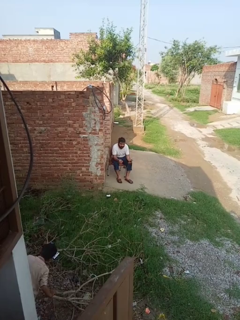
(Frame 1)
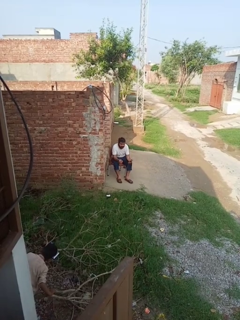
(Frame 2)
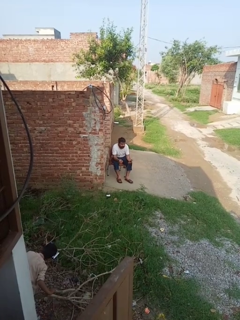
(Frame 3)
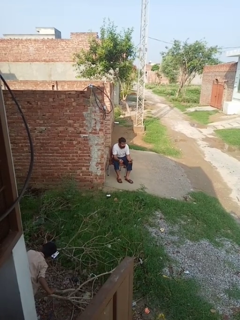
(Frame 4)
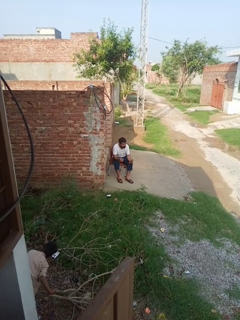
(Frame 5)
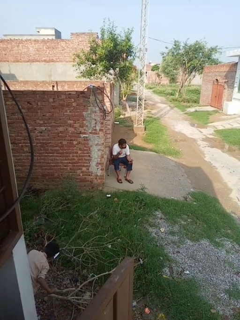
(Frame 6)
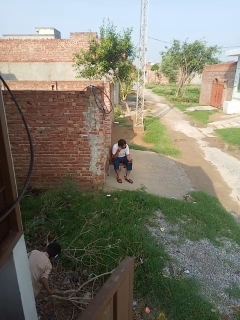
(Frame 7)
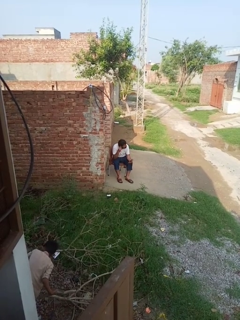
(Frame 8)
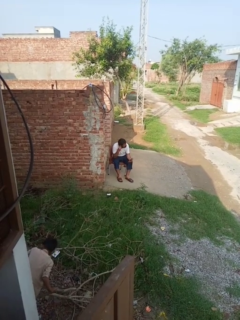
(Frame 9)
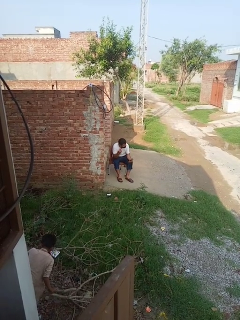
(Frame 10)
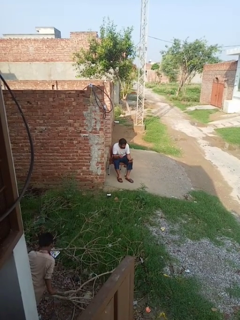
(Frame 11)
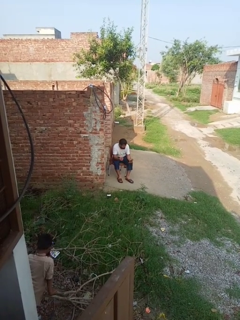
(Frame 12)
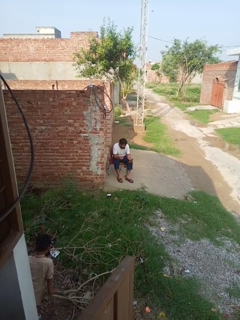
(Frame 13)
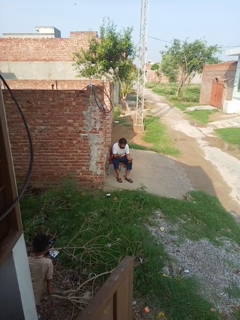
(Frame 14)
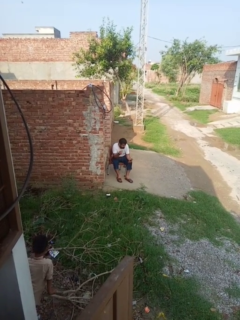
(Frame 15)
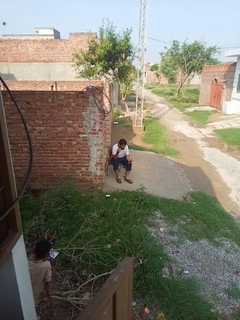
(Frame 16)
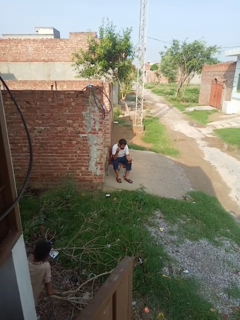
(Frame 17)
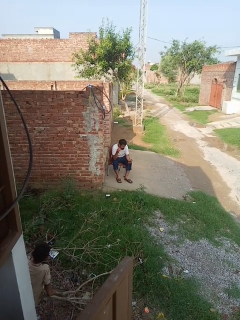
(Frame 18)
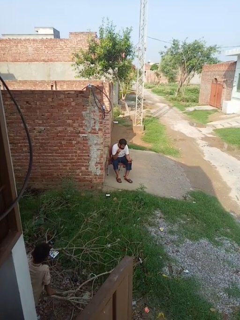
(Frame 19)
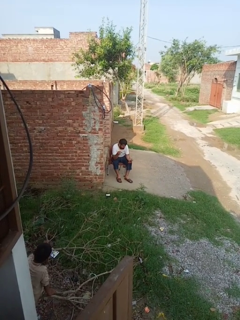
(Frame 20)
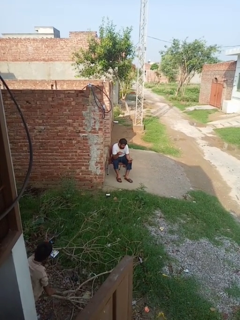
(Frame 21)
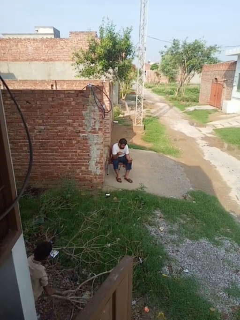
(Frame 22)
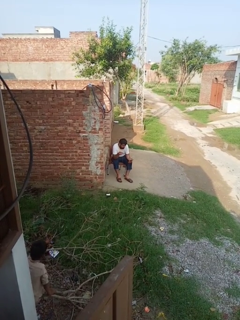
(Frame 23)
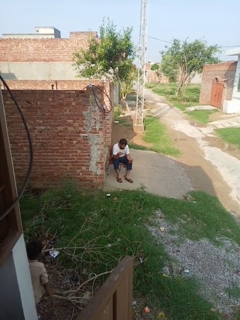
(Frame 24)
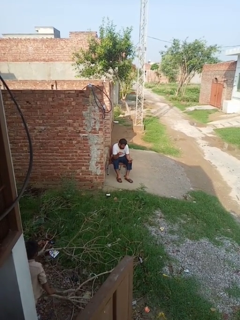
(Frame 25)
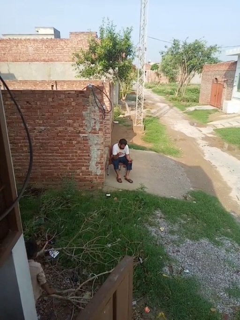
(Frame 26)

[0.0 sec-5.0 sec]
person takes off headphones

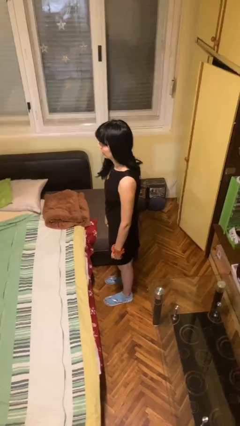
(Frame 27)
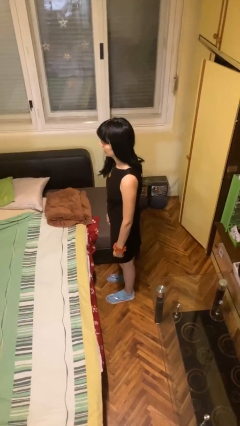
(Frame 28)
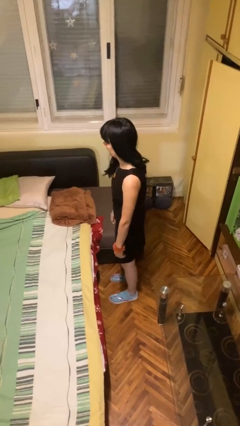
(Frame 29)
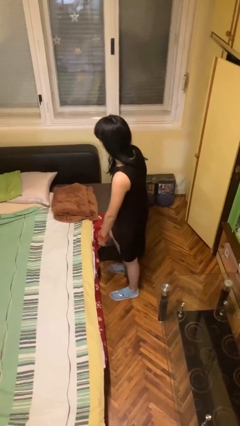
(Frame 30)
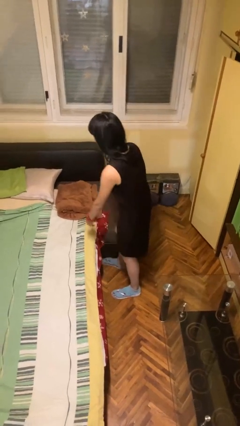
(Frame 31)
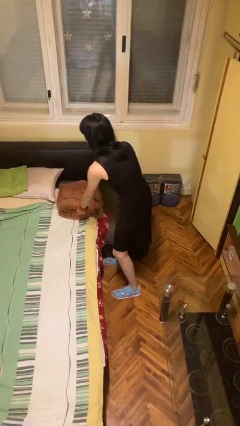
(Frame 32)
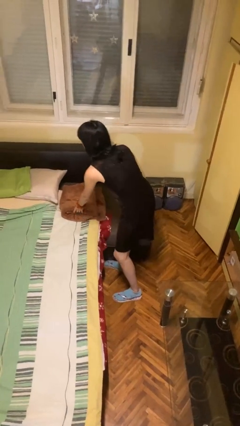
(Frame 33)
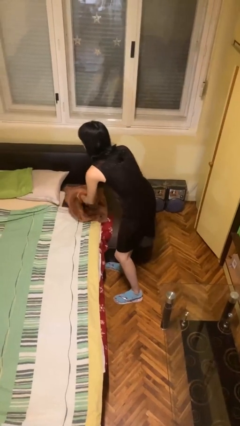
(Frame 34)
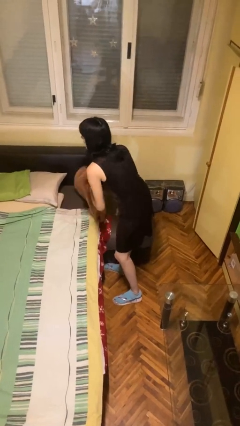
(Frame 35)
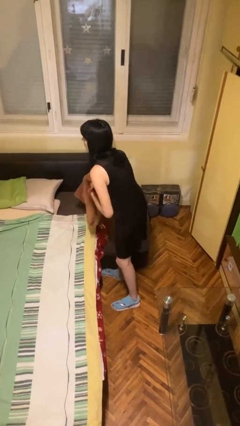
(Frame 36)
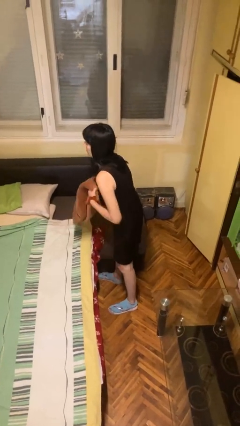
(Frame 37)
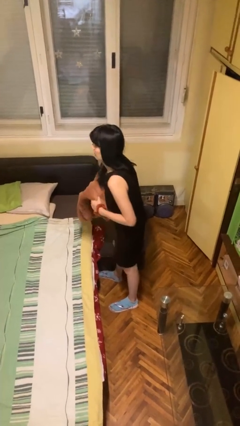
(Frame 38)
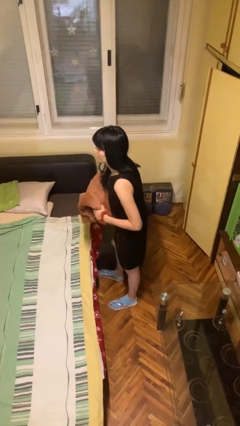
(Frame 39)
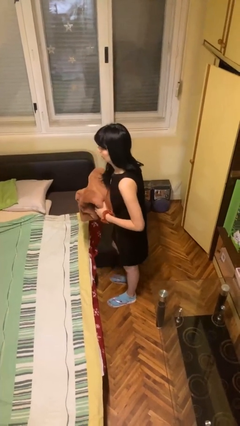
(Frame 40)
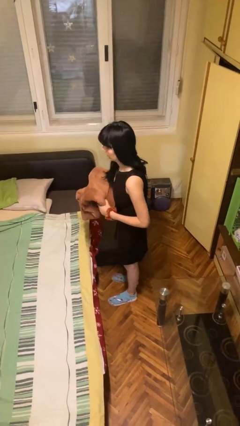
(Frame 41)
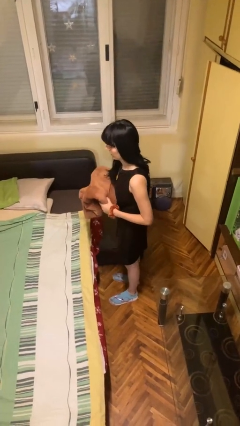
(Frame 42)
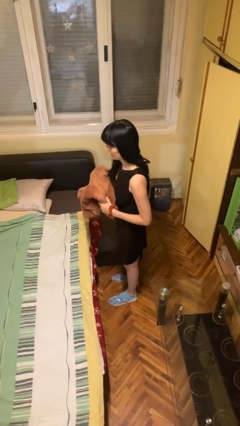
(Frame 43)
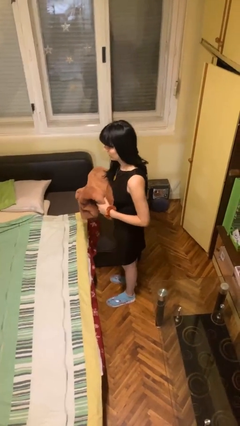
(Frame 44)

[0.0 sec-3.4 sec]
person picks up object from bed

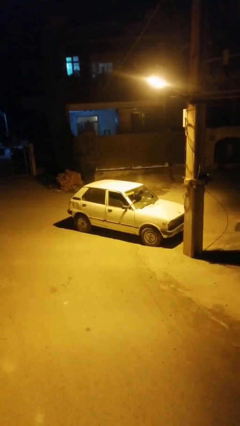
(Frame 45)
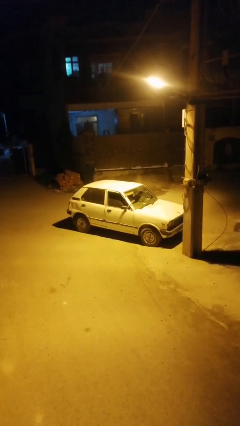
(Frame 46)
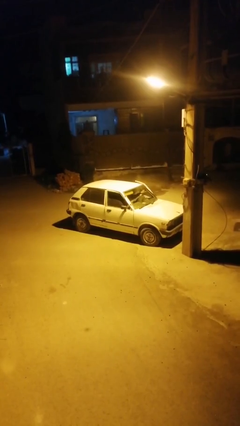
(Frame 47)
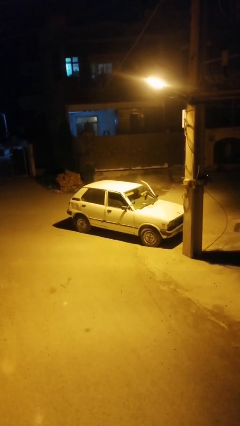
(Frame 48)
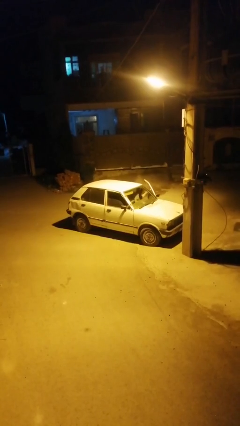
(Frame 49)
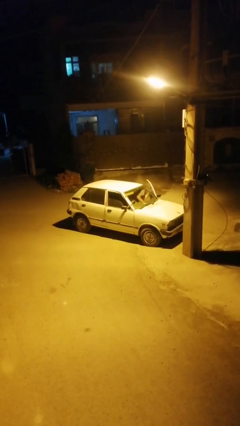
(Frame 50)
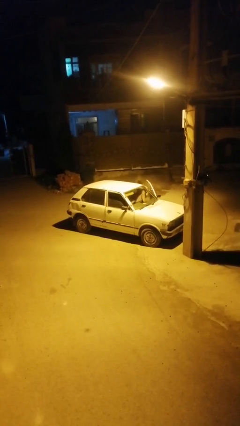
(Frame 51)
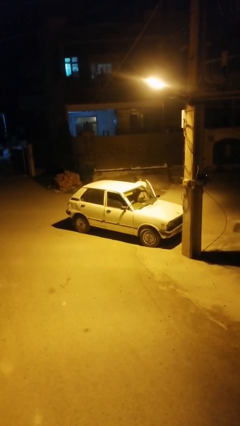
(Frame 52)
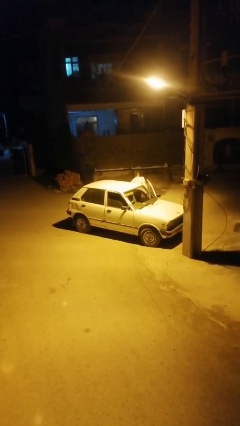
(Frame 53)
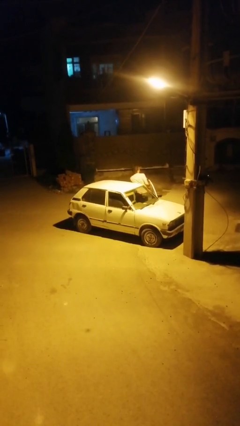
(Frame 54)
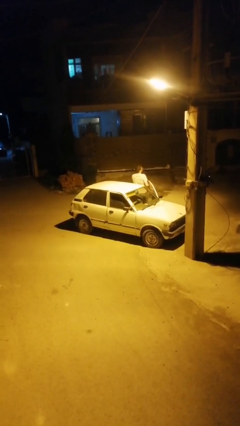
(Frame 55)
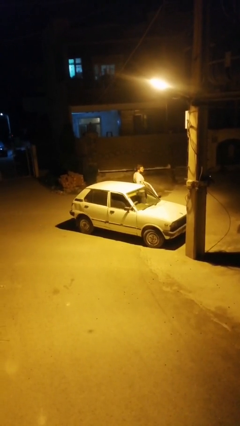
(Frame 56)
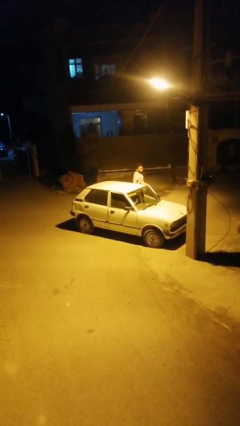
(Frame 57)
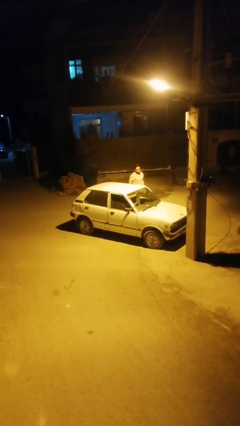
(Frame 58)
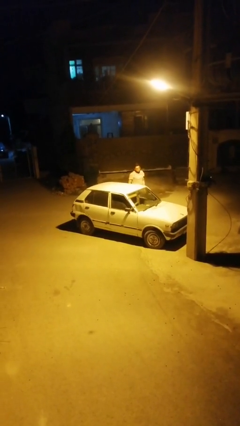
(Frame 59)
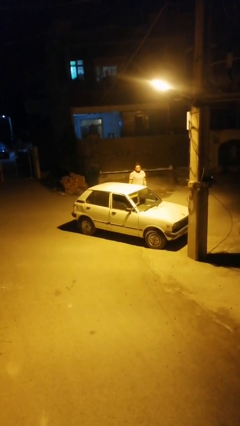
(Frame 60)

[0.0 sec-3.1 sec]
car drops off person

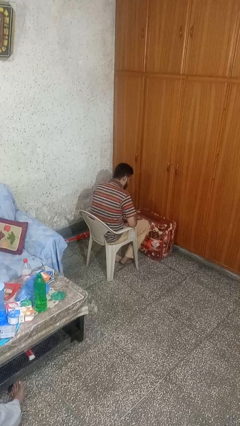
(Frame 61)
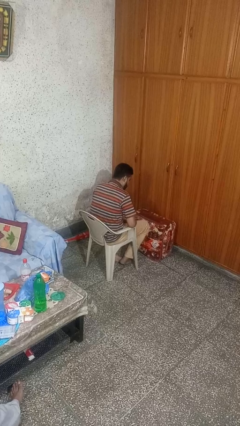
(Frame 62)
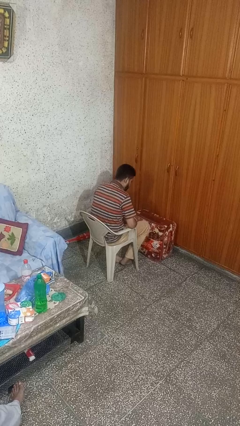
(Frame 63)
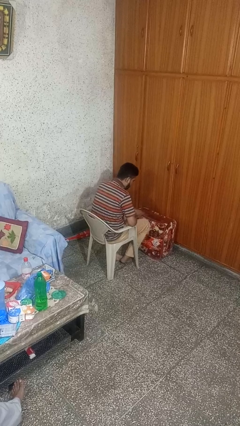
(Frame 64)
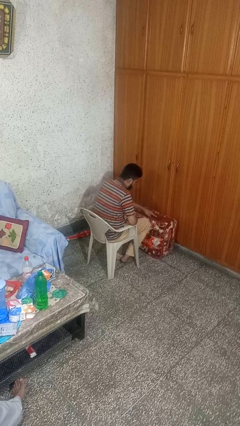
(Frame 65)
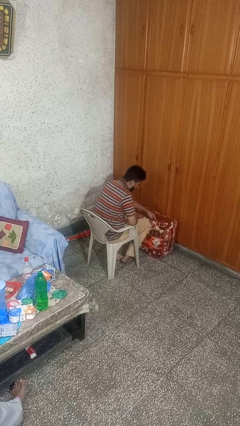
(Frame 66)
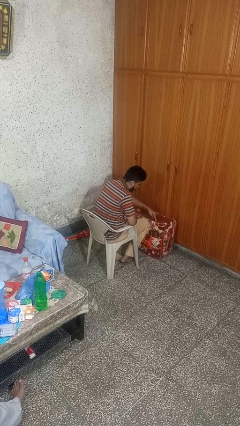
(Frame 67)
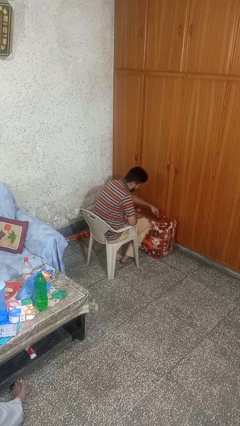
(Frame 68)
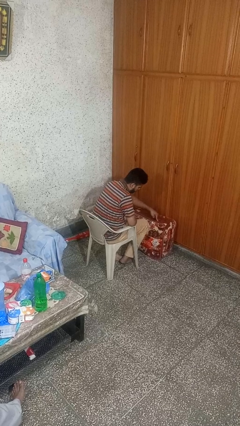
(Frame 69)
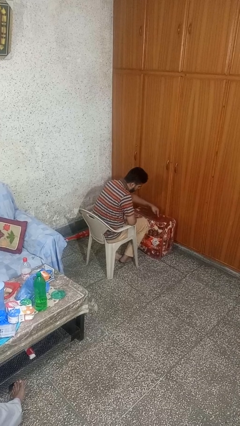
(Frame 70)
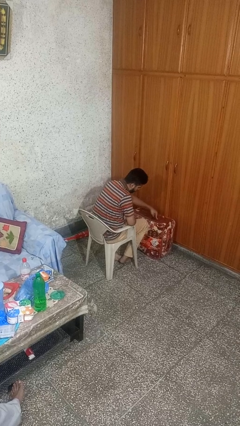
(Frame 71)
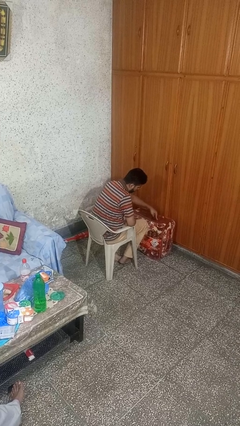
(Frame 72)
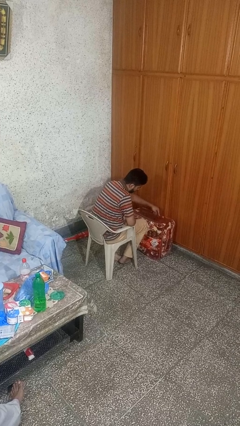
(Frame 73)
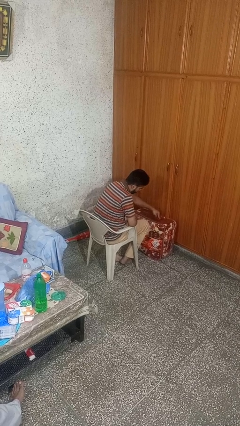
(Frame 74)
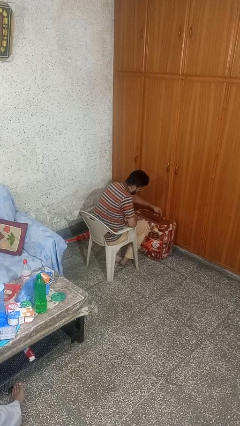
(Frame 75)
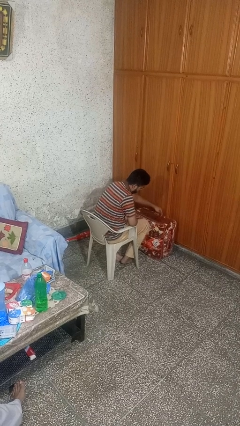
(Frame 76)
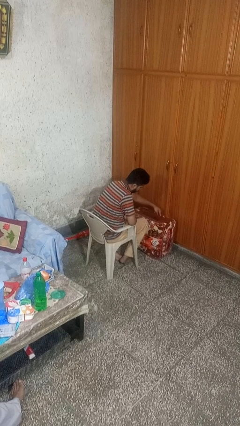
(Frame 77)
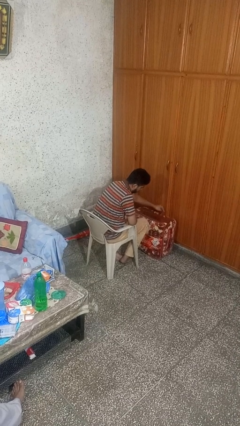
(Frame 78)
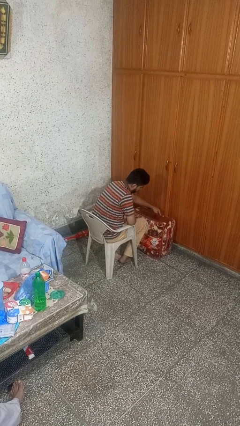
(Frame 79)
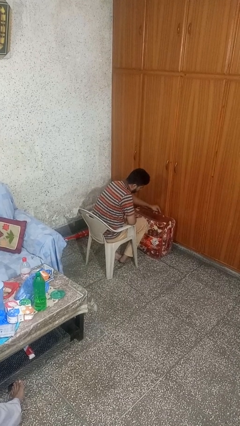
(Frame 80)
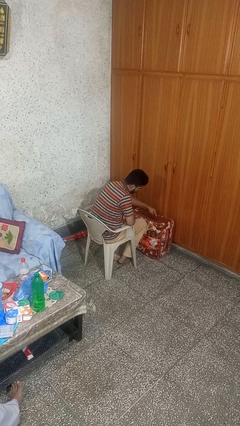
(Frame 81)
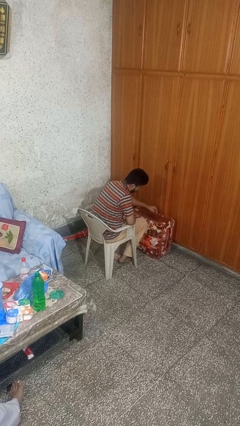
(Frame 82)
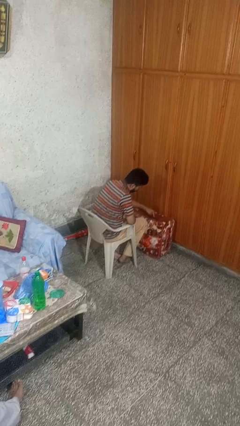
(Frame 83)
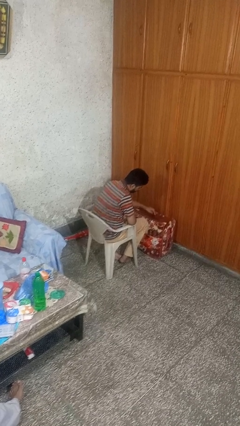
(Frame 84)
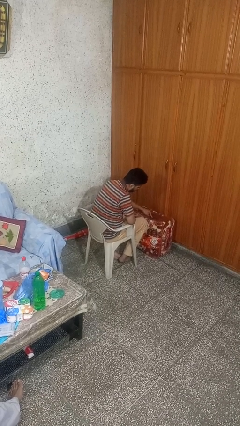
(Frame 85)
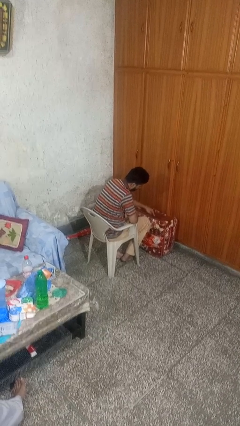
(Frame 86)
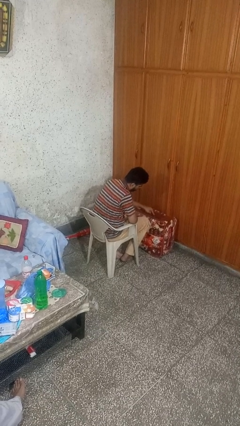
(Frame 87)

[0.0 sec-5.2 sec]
person taps object with finger

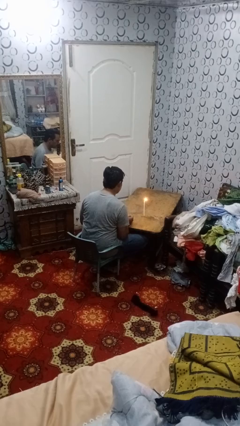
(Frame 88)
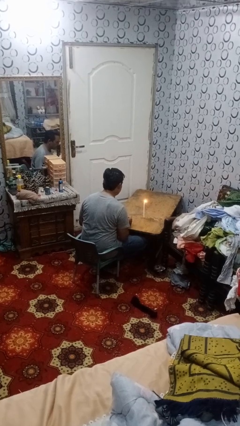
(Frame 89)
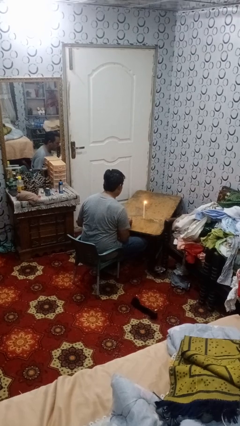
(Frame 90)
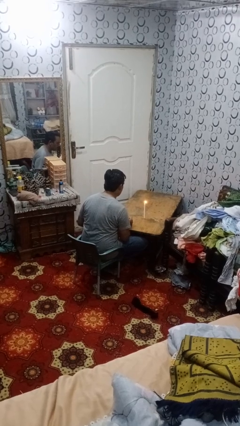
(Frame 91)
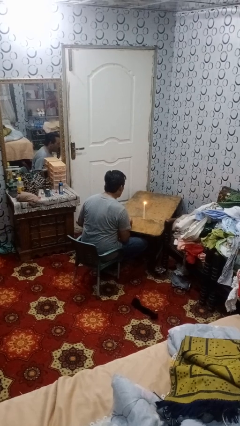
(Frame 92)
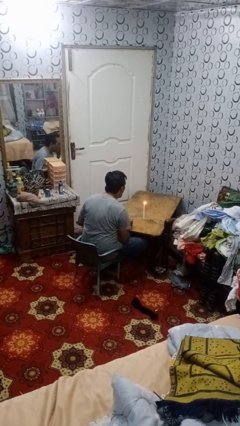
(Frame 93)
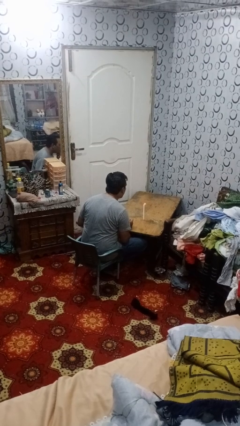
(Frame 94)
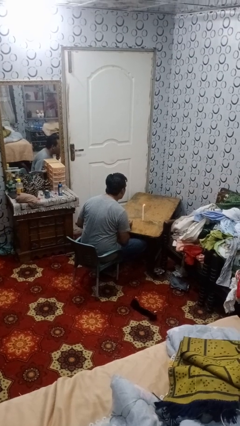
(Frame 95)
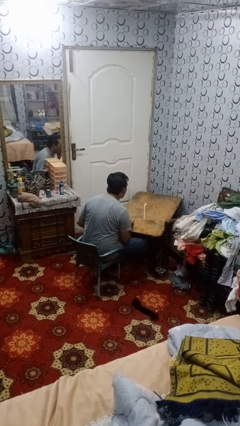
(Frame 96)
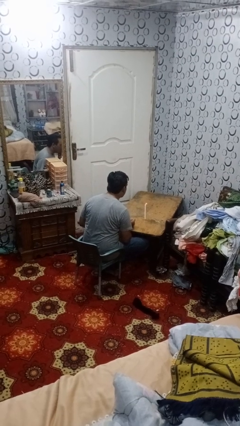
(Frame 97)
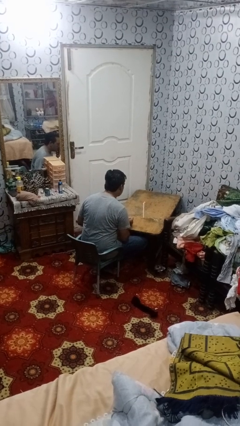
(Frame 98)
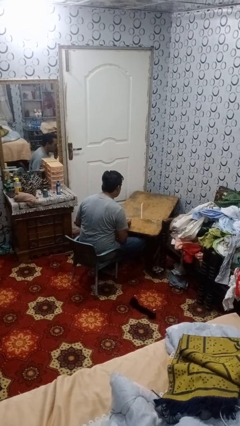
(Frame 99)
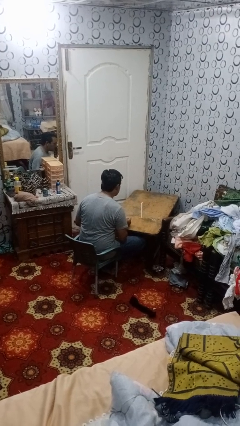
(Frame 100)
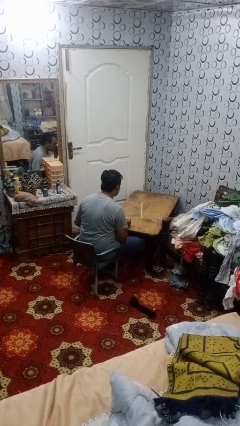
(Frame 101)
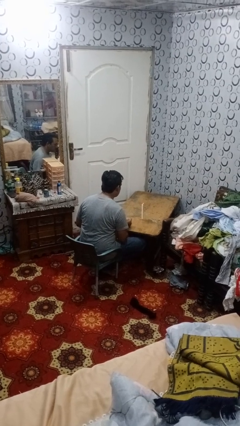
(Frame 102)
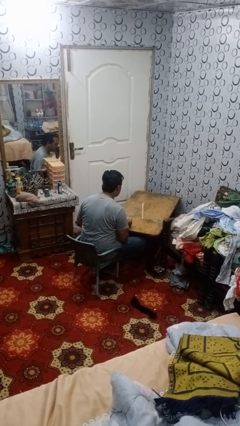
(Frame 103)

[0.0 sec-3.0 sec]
person extinguishes candle
